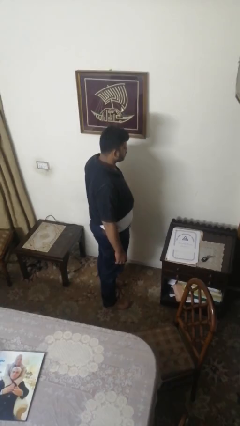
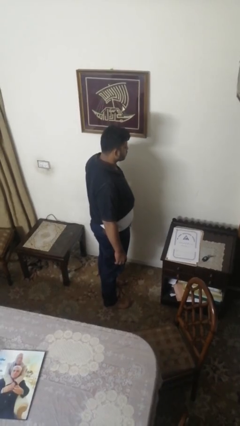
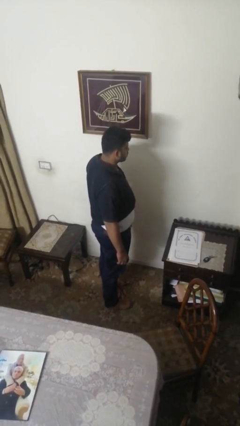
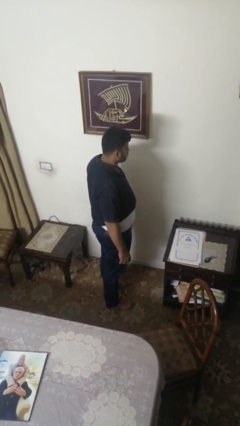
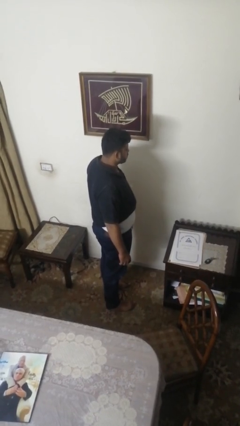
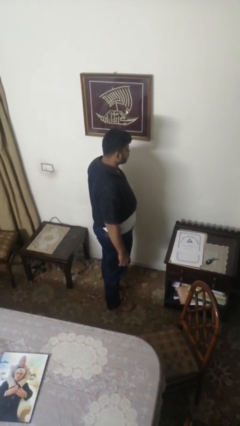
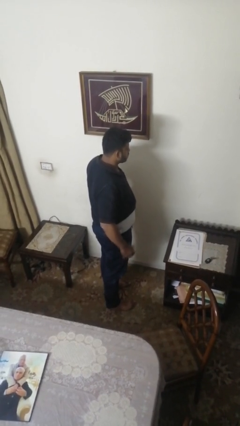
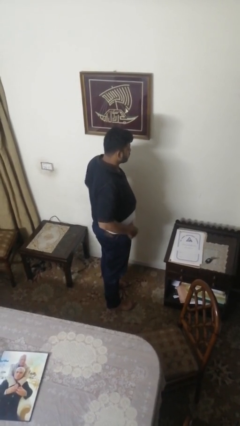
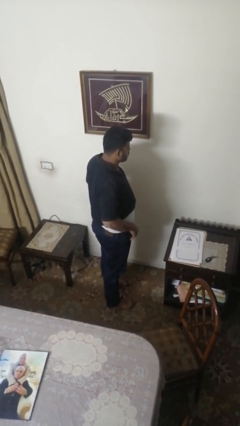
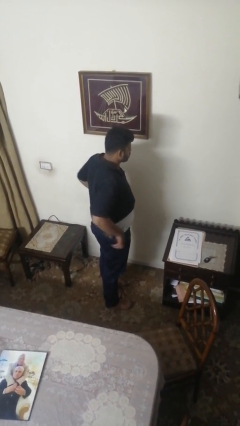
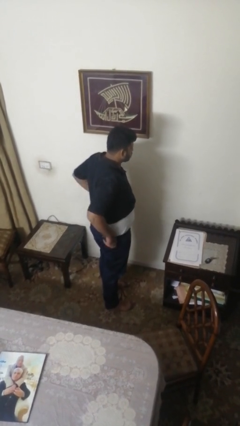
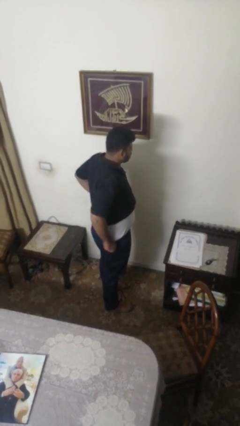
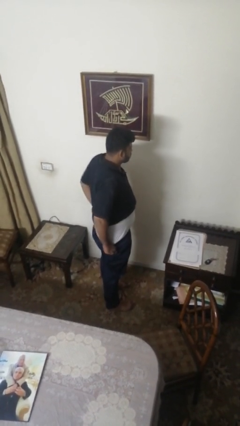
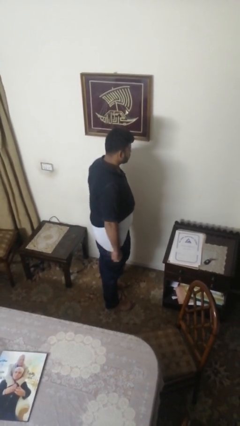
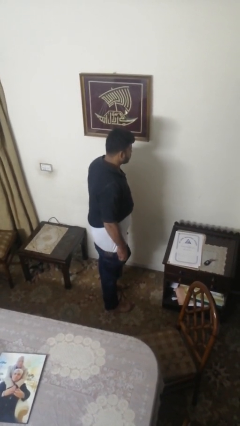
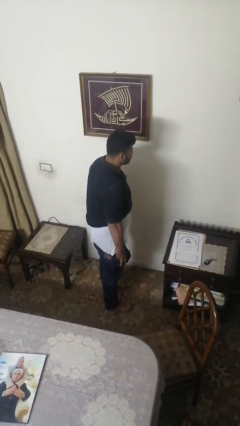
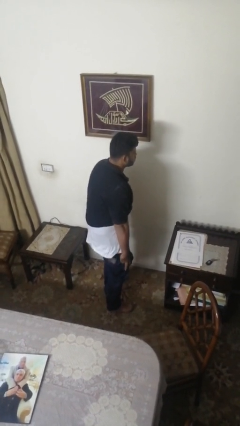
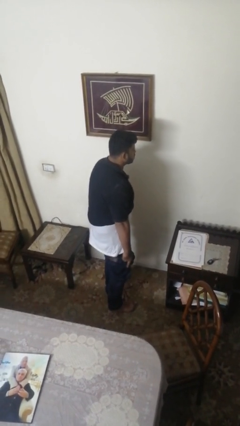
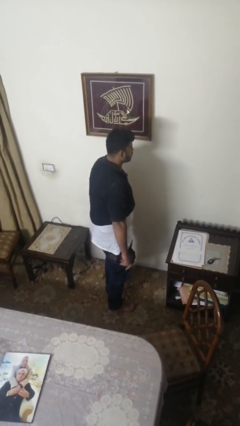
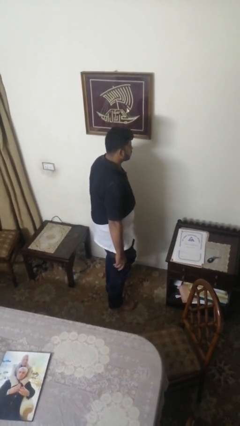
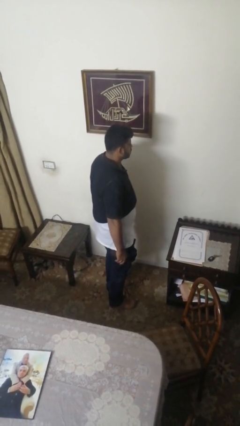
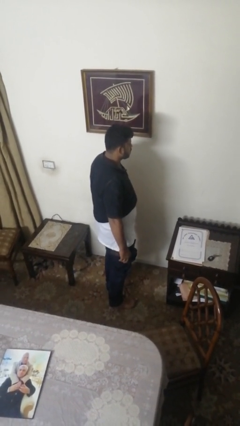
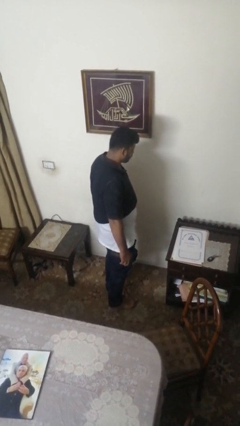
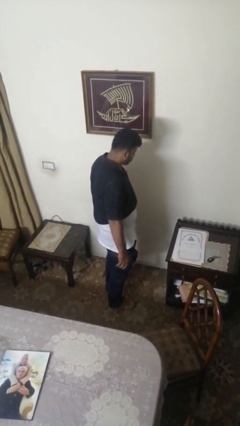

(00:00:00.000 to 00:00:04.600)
person takes off pants

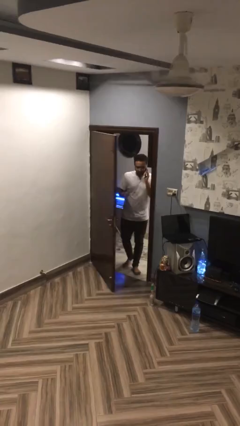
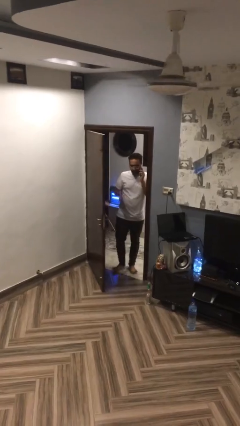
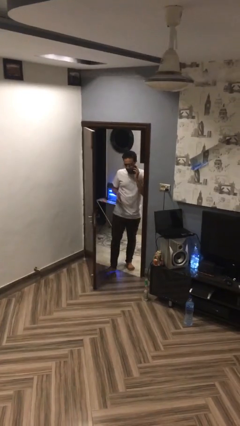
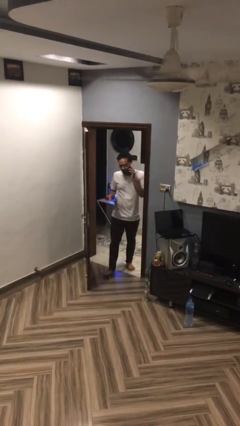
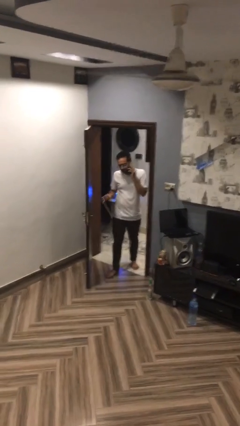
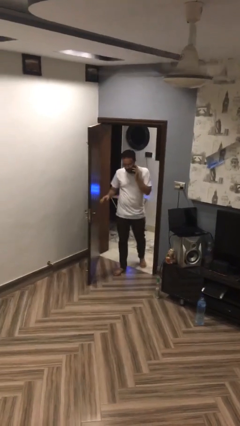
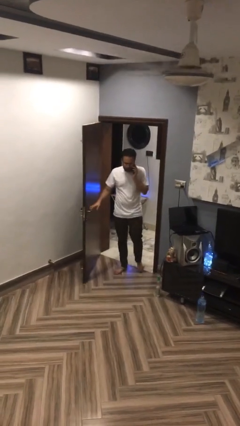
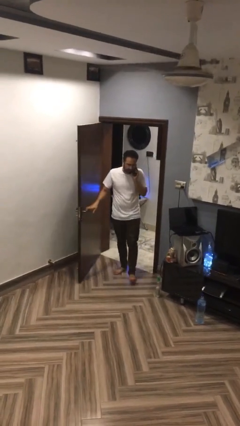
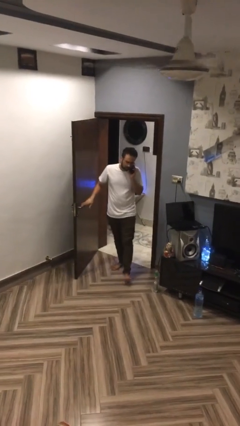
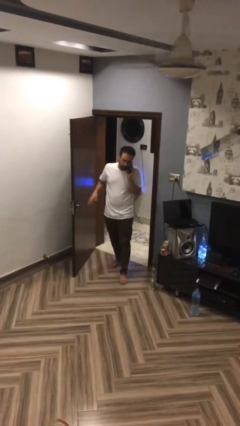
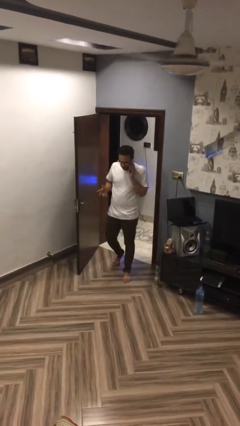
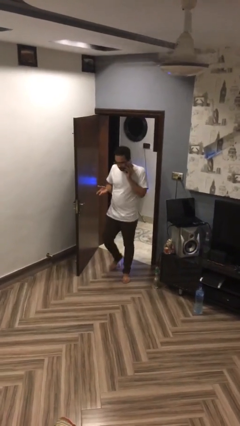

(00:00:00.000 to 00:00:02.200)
person enters scene through structure

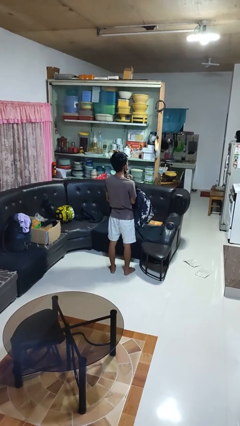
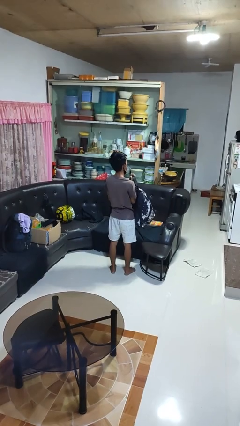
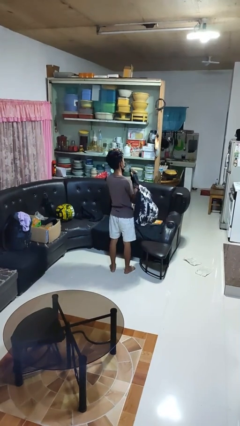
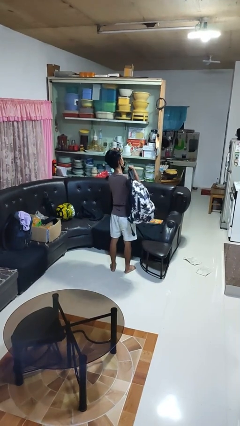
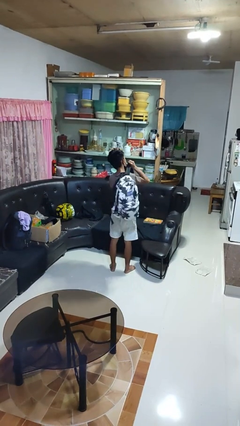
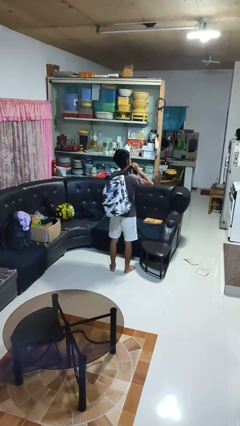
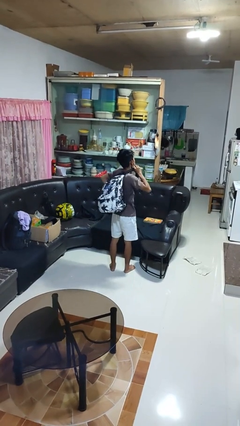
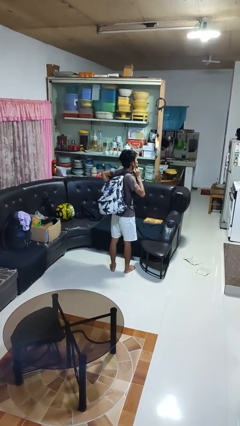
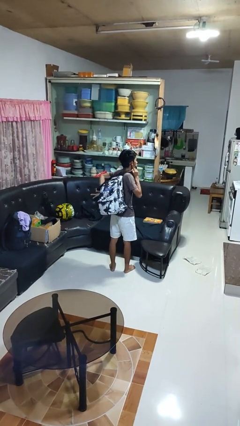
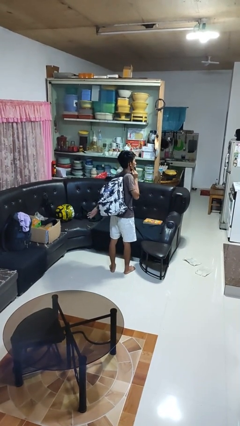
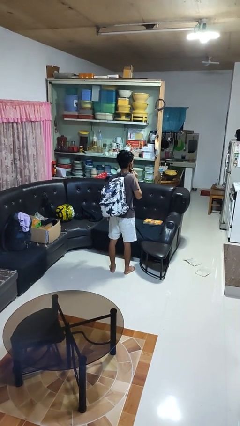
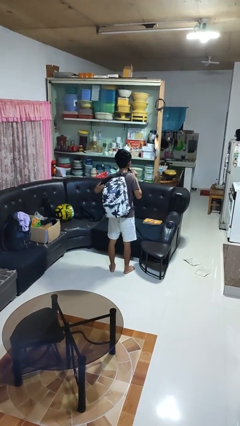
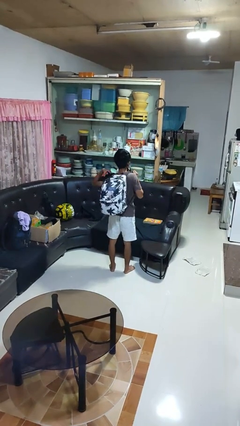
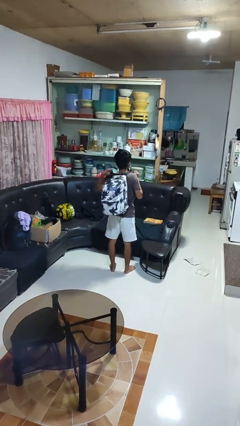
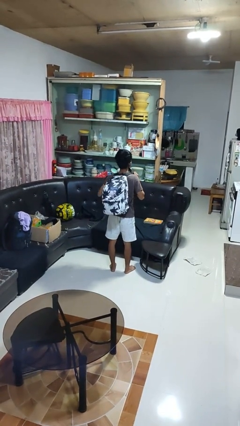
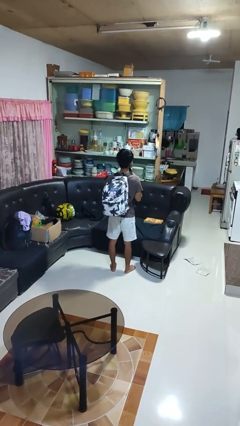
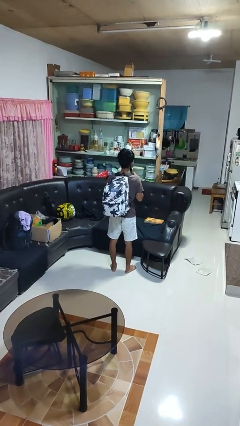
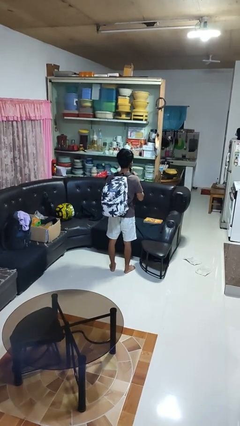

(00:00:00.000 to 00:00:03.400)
person puts on backpack

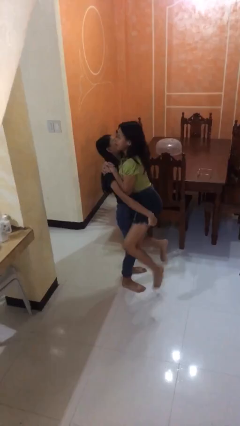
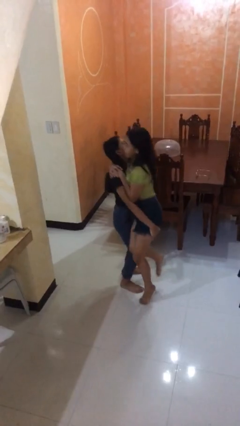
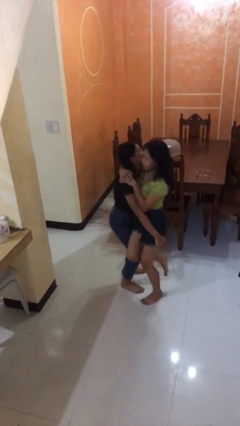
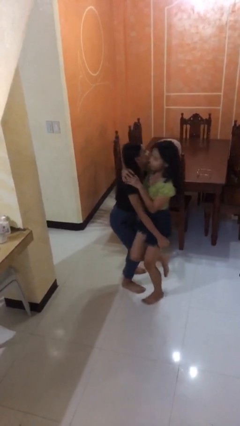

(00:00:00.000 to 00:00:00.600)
person puts down person

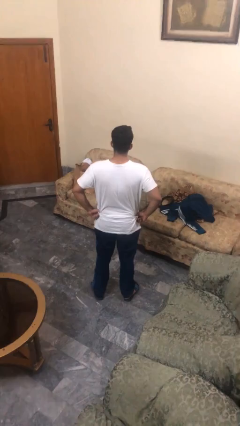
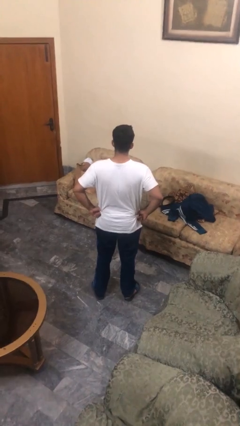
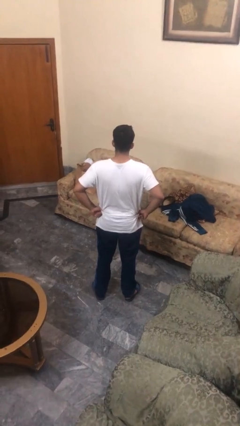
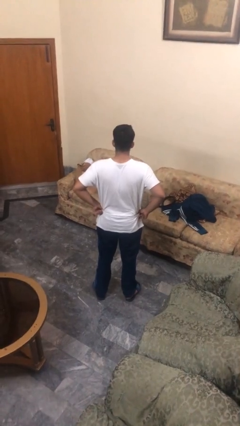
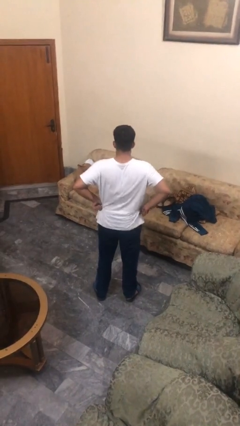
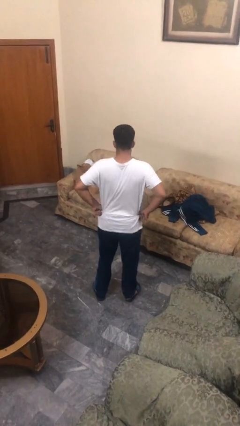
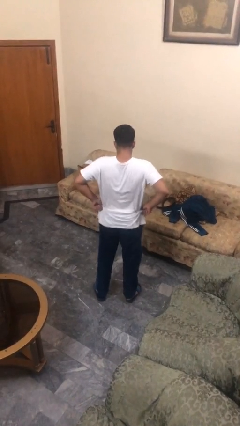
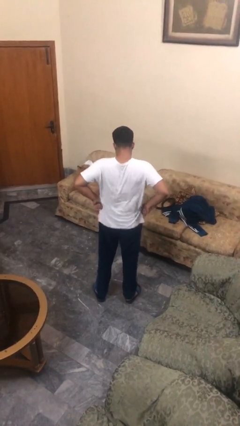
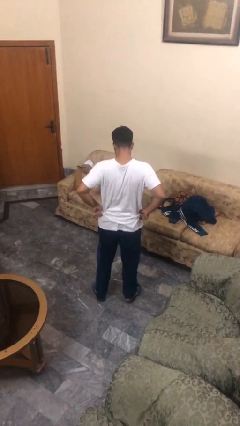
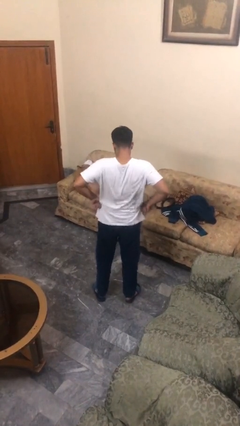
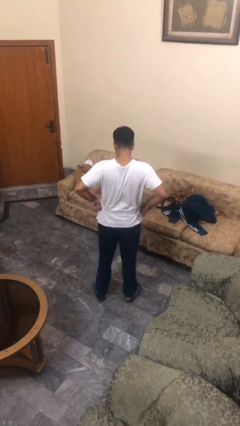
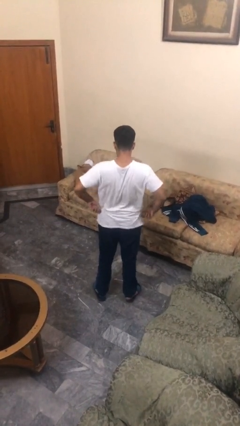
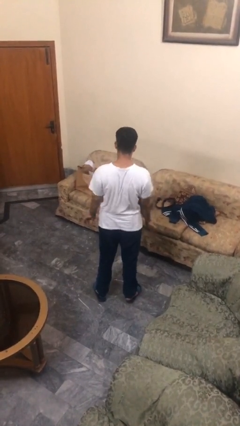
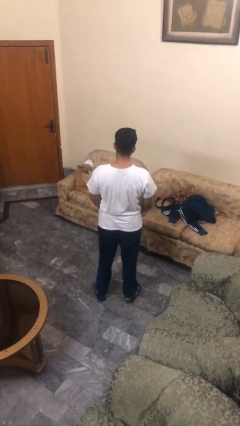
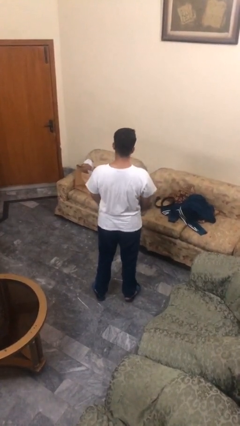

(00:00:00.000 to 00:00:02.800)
person hikes up pants

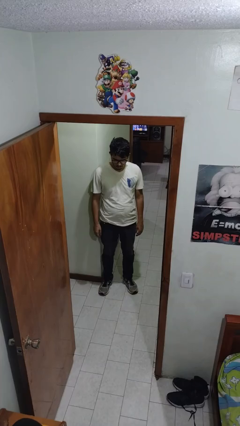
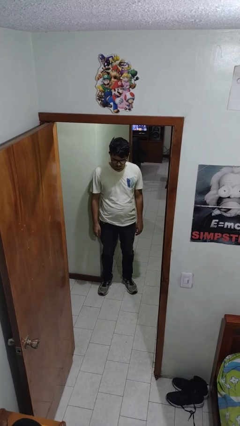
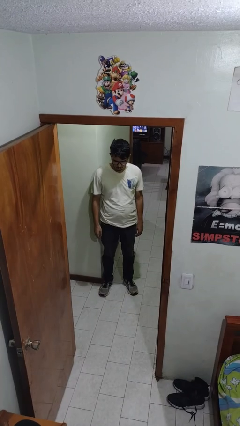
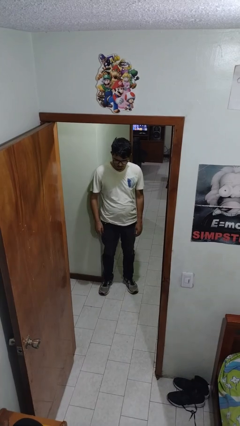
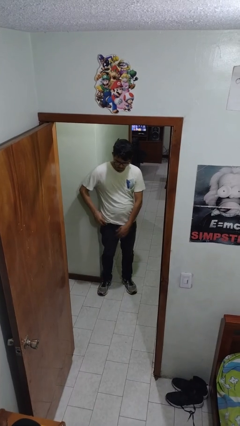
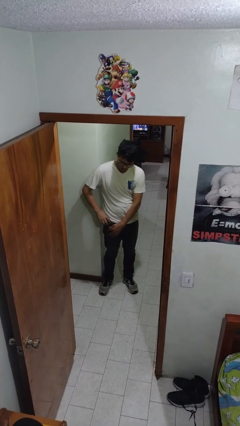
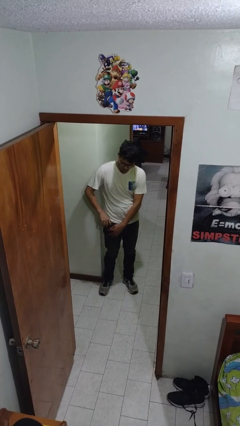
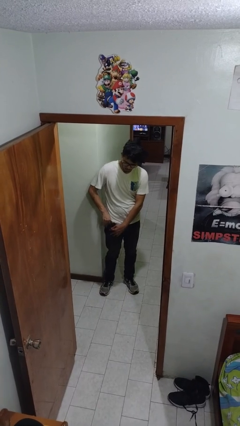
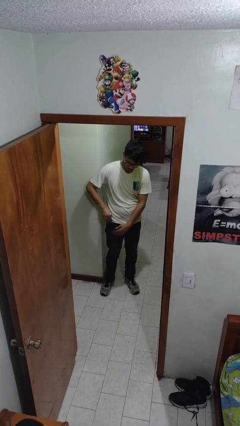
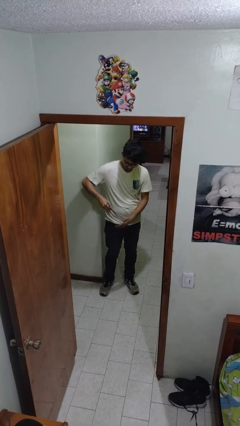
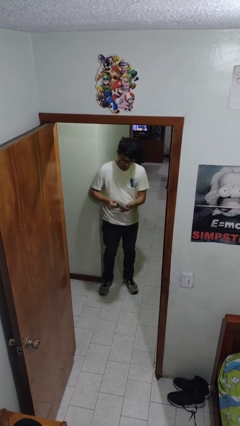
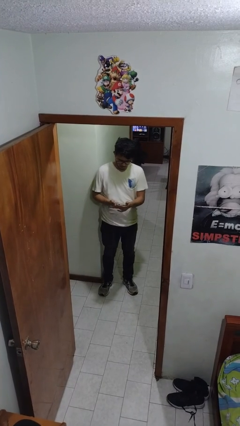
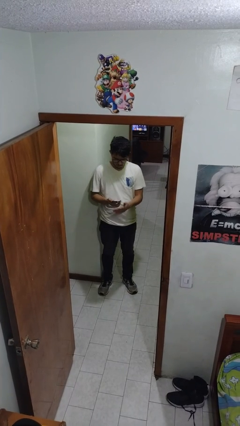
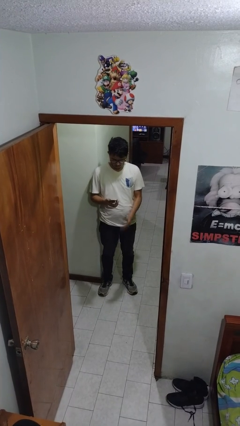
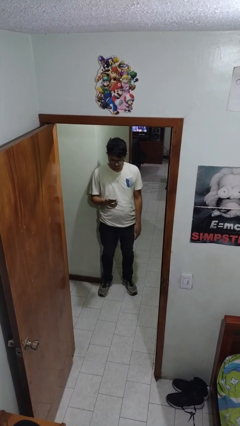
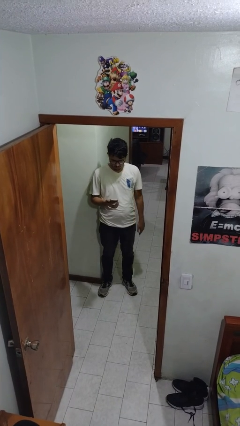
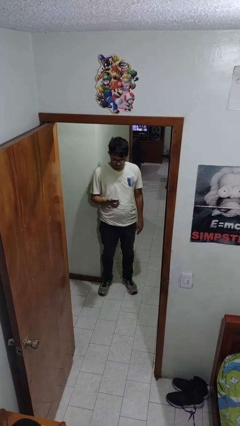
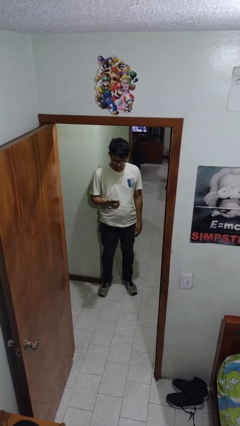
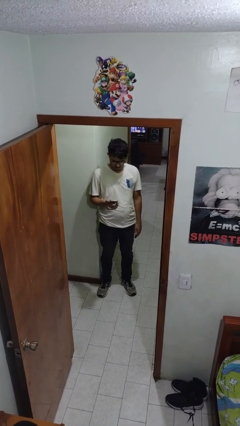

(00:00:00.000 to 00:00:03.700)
person takes phone from pocket

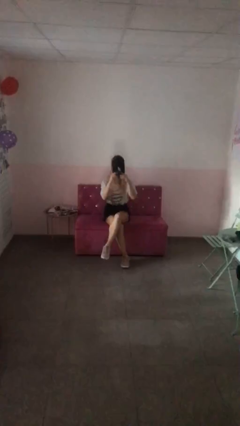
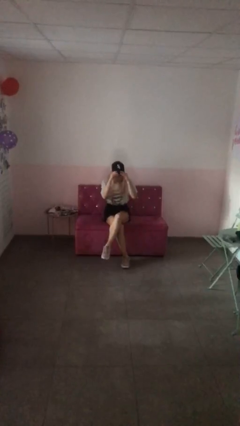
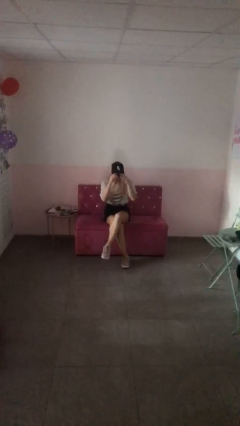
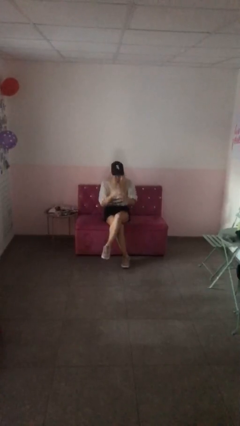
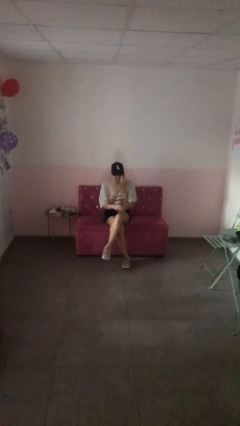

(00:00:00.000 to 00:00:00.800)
person puts on hat
